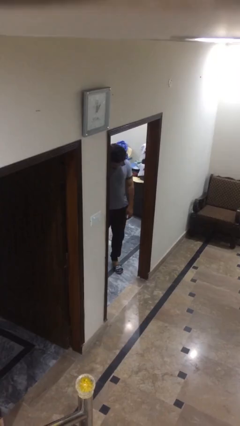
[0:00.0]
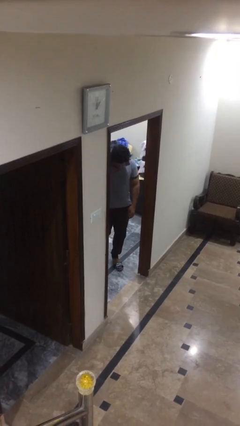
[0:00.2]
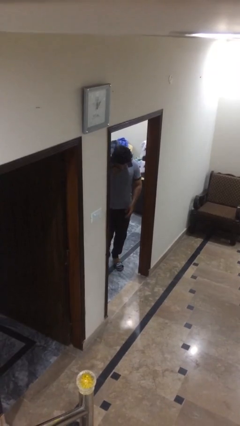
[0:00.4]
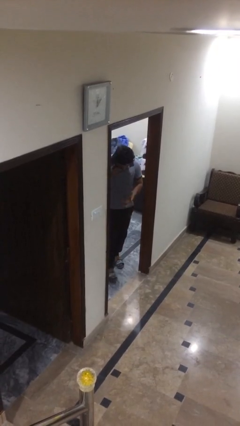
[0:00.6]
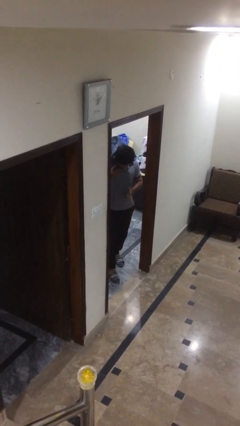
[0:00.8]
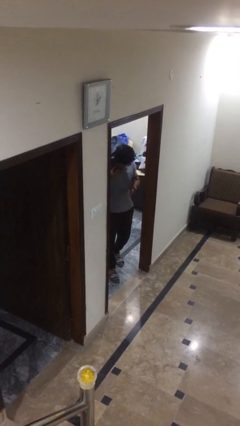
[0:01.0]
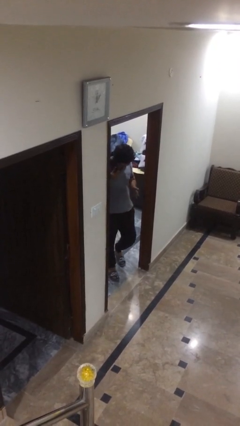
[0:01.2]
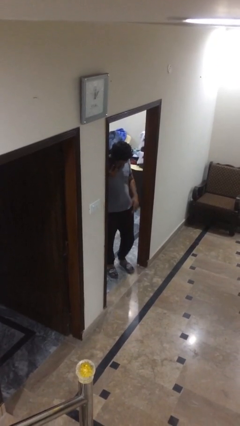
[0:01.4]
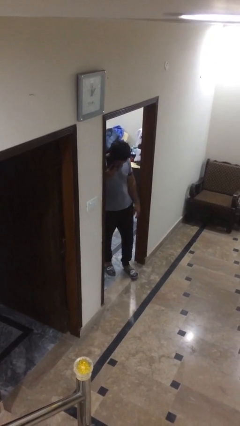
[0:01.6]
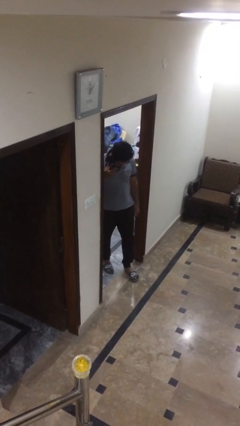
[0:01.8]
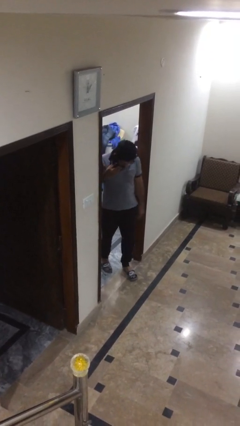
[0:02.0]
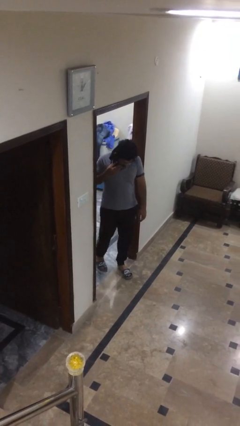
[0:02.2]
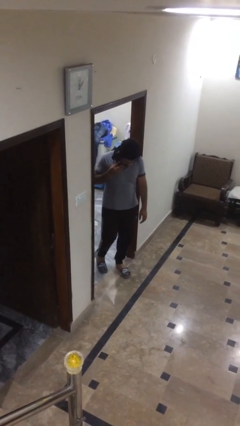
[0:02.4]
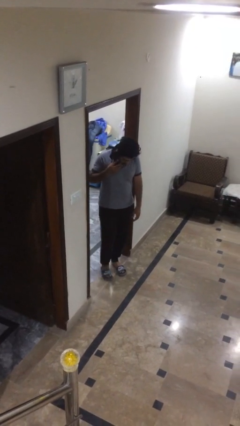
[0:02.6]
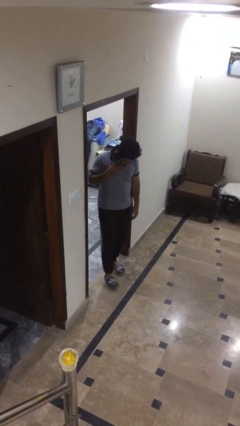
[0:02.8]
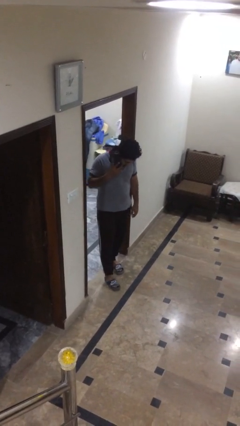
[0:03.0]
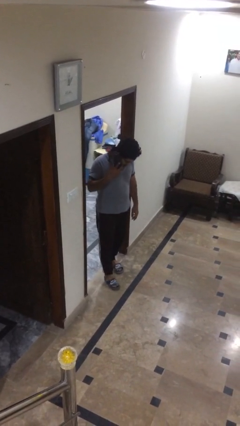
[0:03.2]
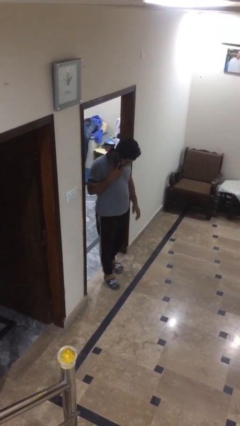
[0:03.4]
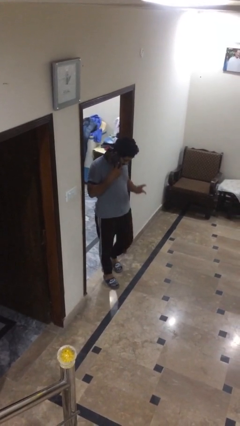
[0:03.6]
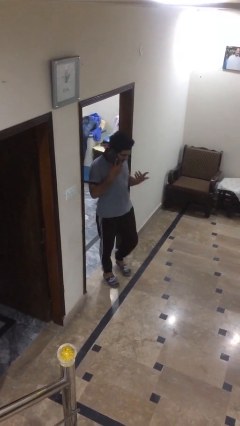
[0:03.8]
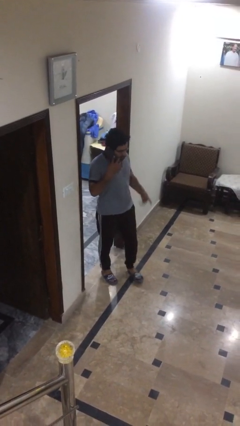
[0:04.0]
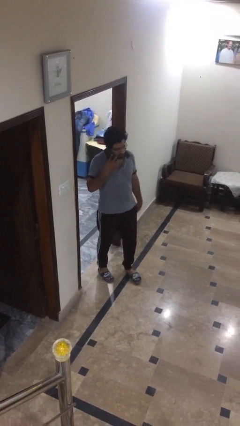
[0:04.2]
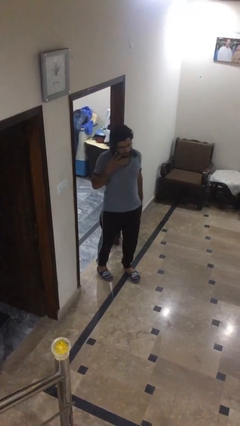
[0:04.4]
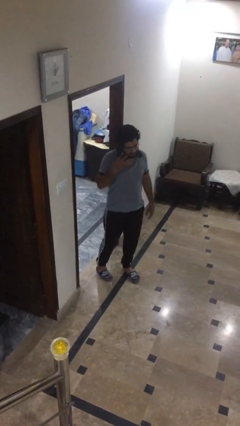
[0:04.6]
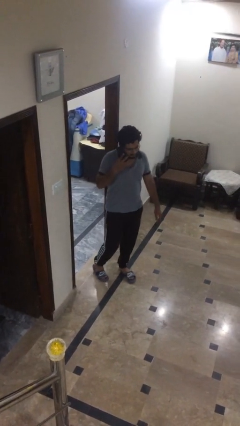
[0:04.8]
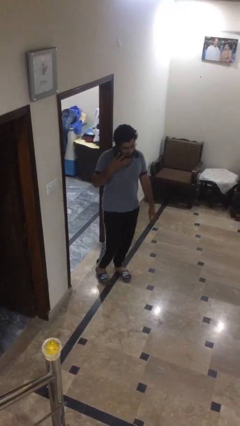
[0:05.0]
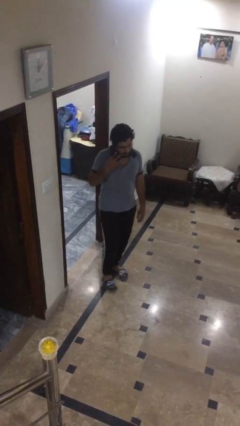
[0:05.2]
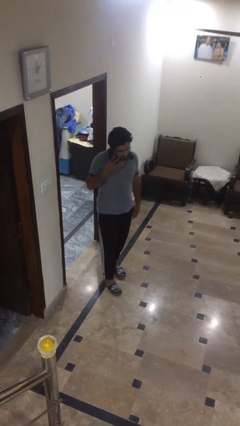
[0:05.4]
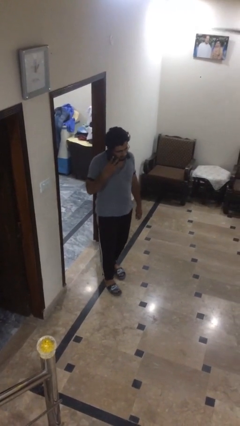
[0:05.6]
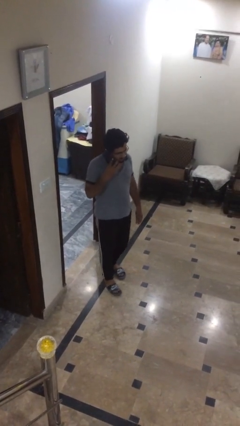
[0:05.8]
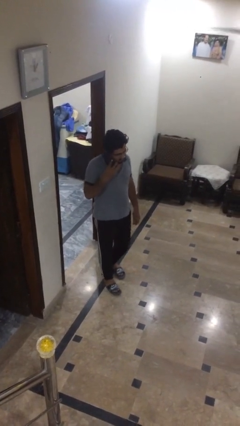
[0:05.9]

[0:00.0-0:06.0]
person enters scene through structure

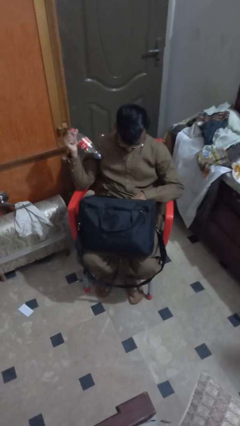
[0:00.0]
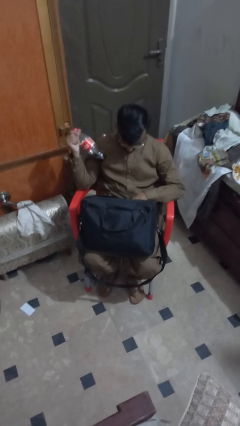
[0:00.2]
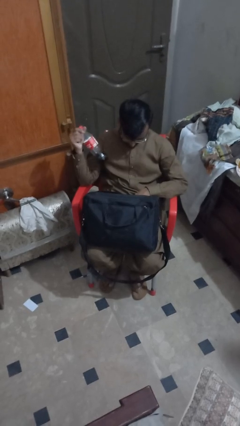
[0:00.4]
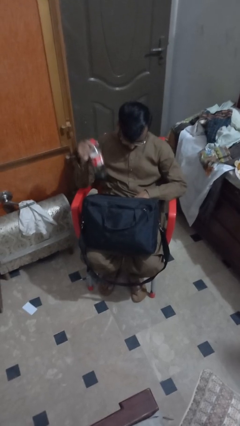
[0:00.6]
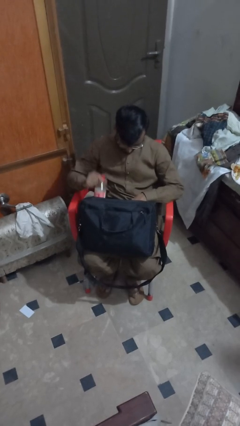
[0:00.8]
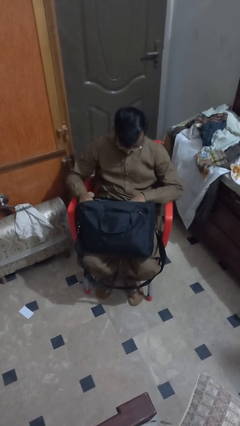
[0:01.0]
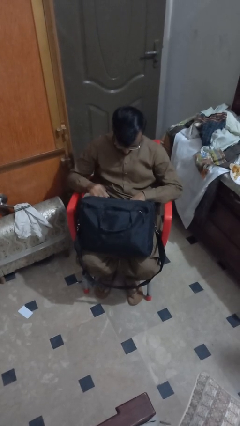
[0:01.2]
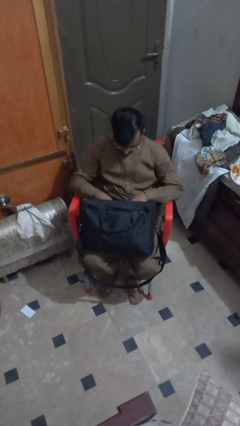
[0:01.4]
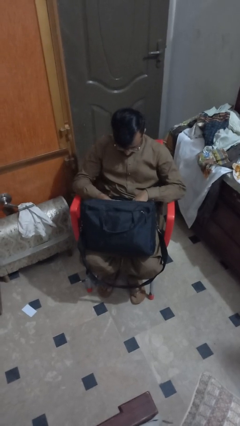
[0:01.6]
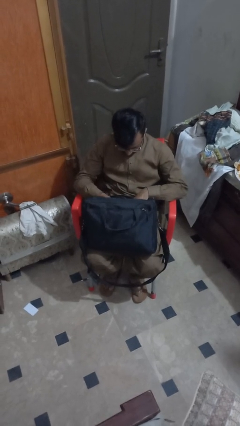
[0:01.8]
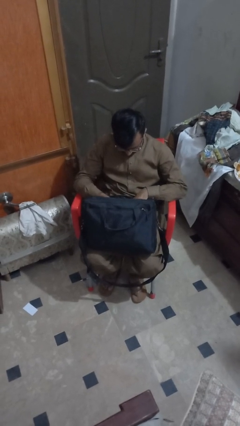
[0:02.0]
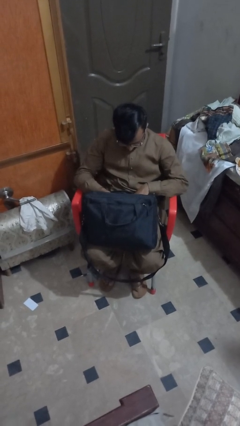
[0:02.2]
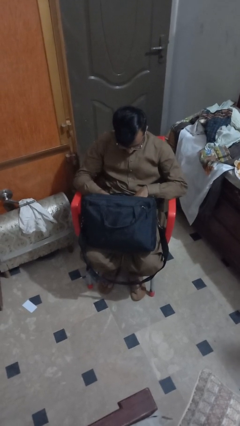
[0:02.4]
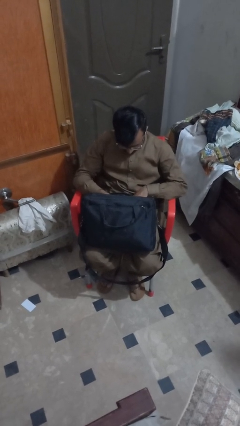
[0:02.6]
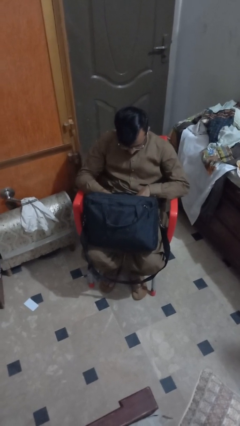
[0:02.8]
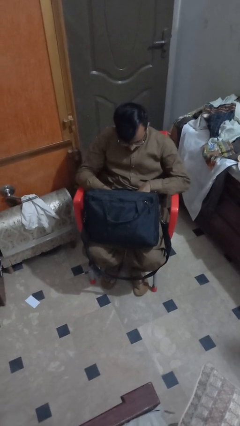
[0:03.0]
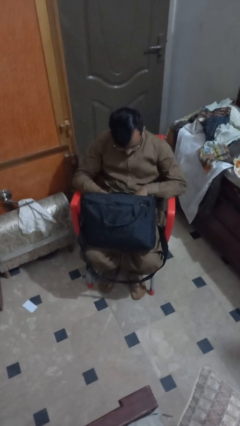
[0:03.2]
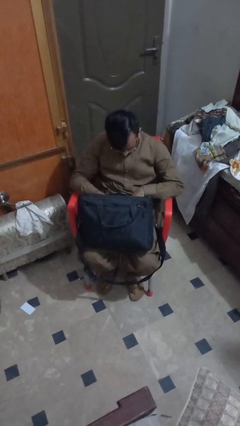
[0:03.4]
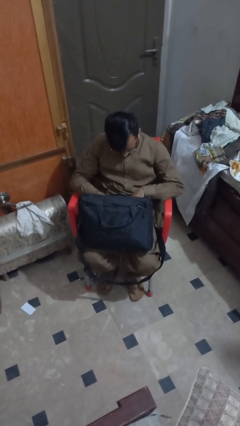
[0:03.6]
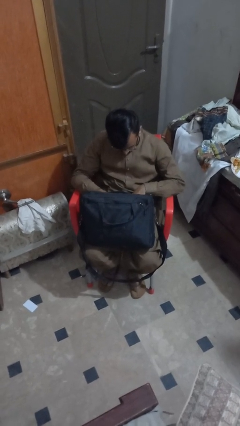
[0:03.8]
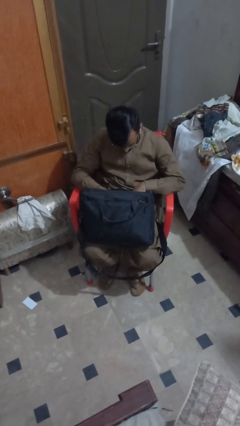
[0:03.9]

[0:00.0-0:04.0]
person puts object into bag

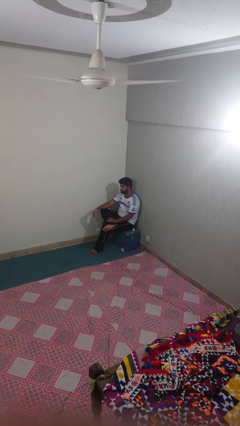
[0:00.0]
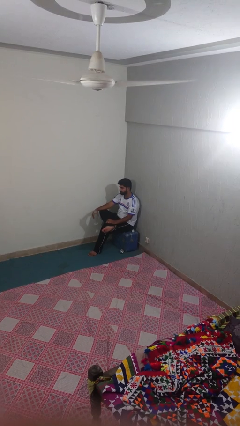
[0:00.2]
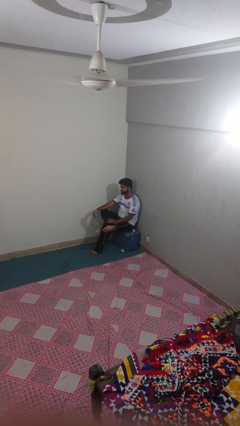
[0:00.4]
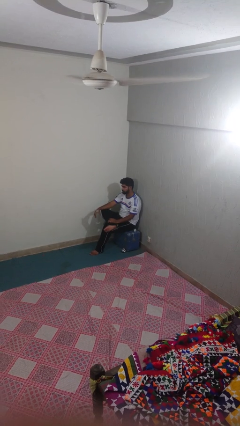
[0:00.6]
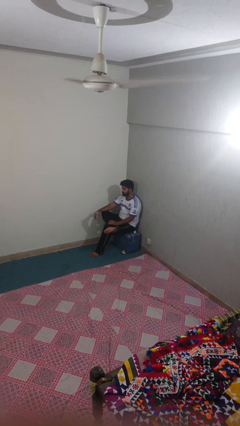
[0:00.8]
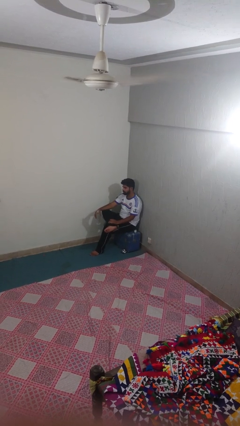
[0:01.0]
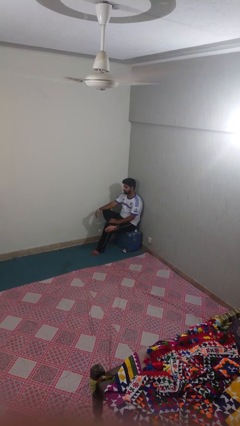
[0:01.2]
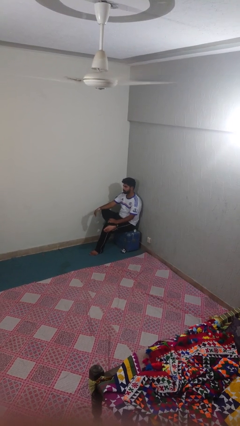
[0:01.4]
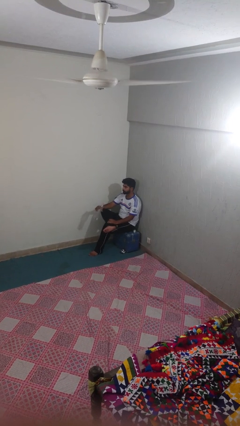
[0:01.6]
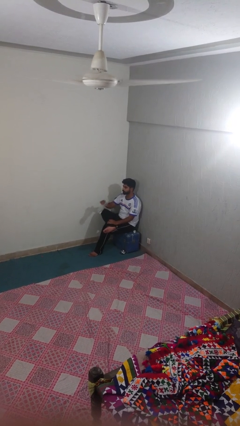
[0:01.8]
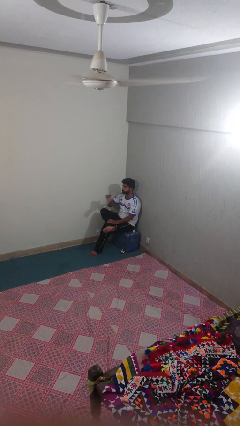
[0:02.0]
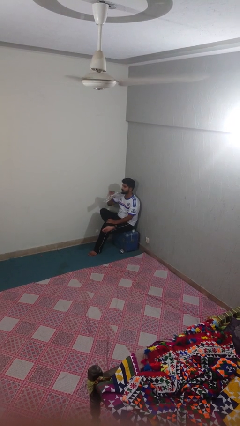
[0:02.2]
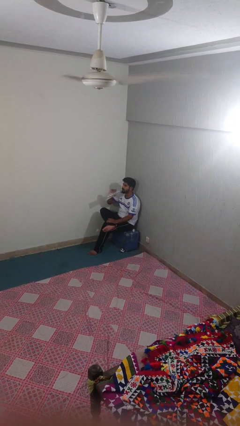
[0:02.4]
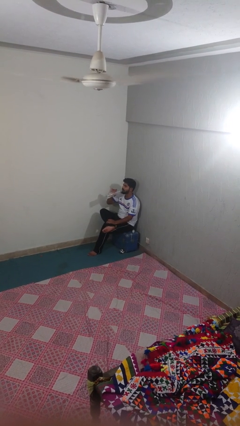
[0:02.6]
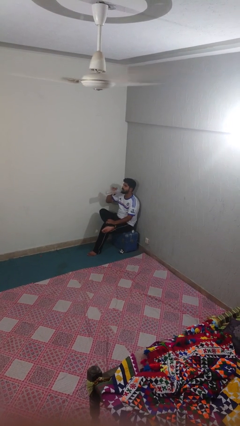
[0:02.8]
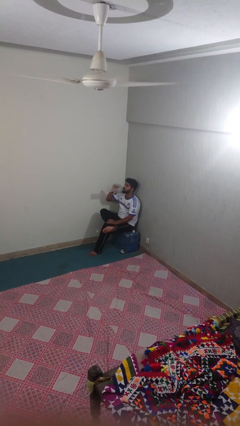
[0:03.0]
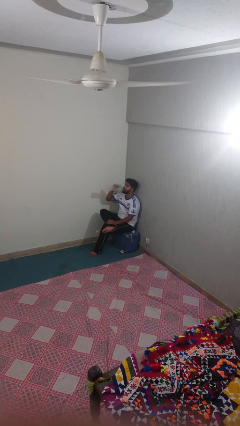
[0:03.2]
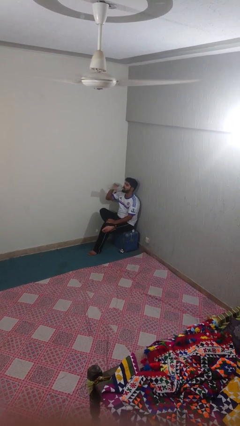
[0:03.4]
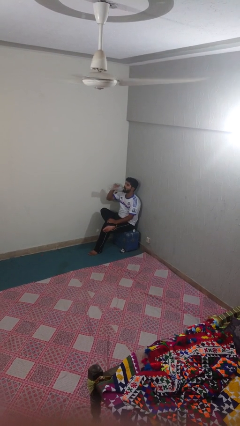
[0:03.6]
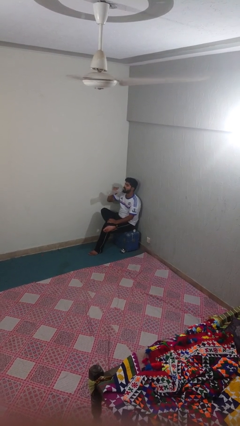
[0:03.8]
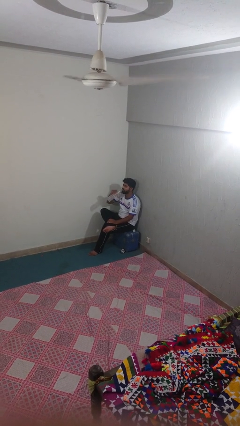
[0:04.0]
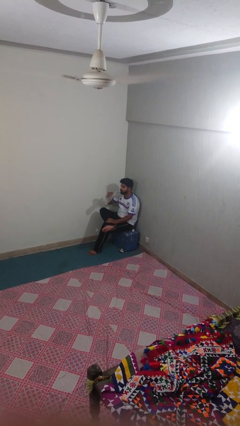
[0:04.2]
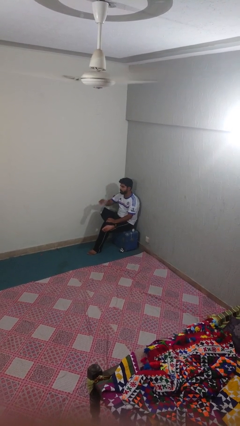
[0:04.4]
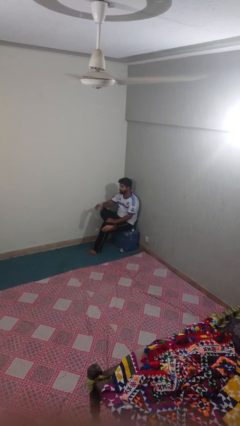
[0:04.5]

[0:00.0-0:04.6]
person drinks from bottle

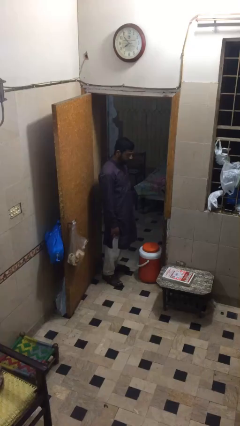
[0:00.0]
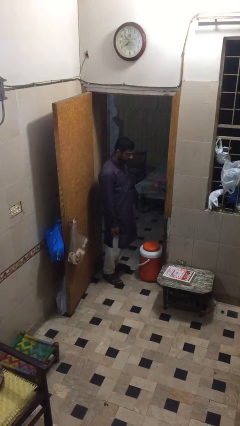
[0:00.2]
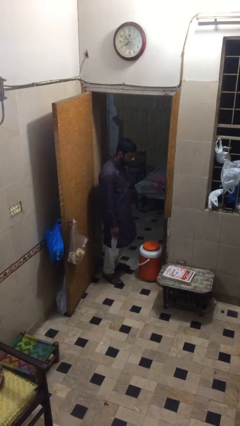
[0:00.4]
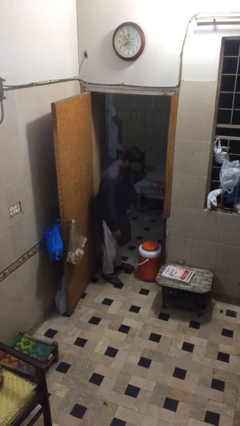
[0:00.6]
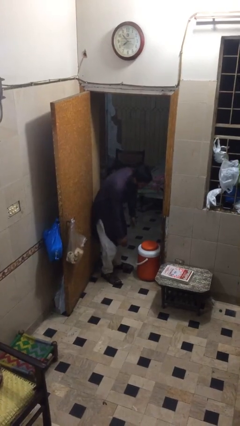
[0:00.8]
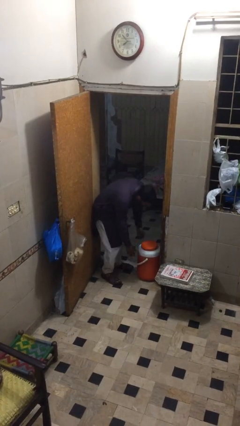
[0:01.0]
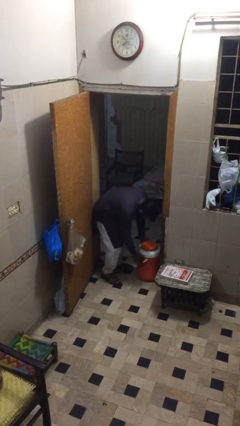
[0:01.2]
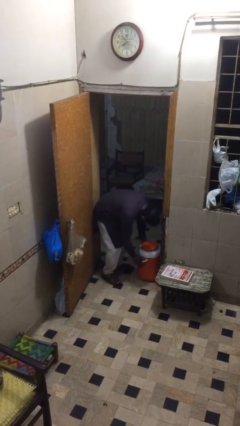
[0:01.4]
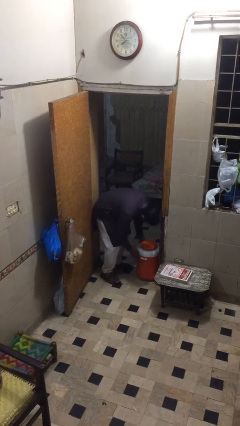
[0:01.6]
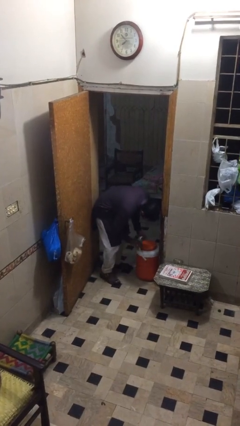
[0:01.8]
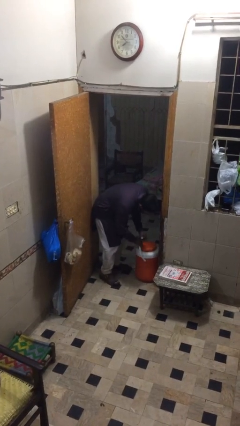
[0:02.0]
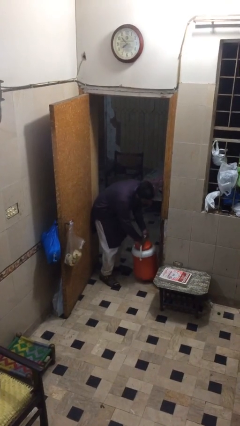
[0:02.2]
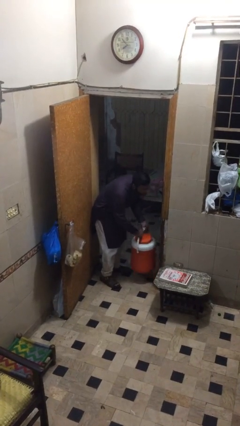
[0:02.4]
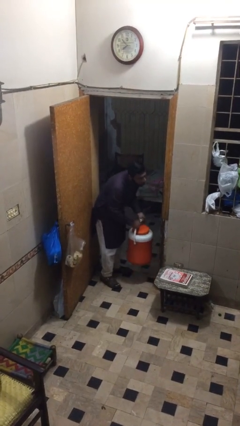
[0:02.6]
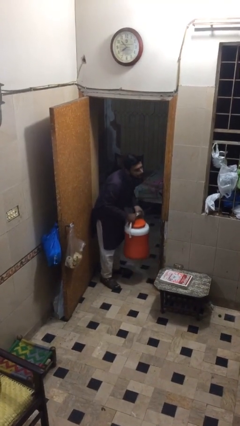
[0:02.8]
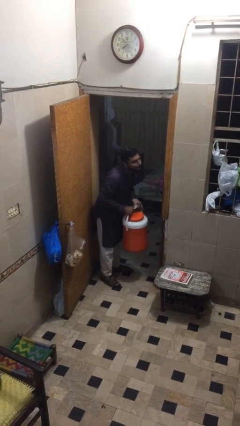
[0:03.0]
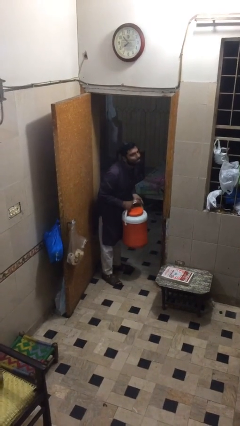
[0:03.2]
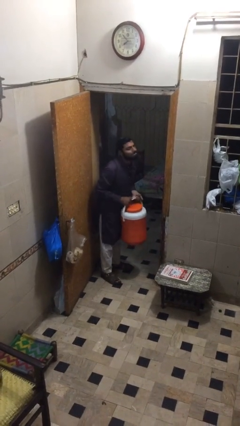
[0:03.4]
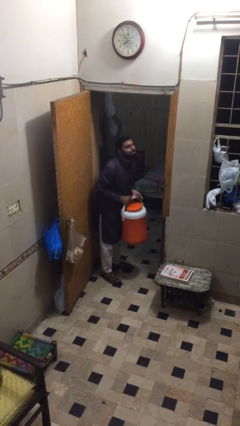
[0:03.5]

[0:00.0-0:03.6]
person picks up object from floor
